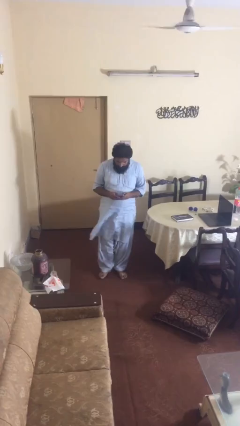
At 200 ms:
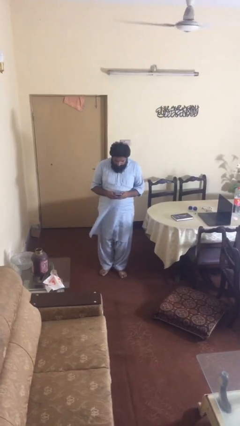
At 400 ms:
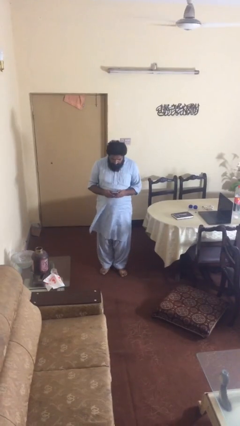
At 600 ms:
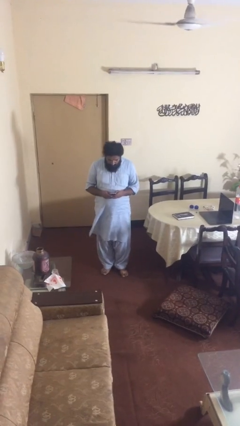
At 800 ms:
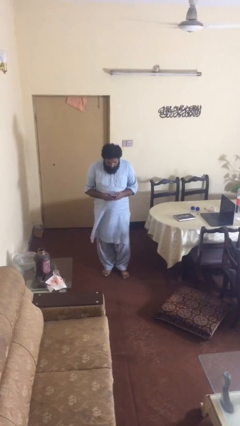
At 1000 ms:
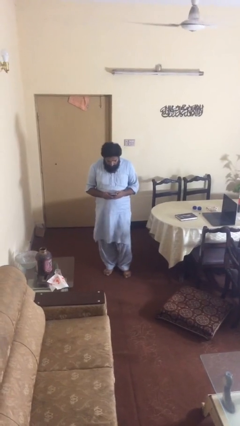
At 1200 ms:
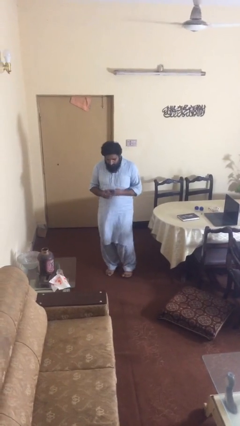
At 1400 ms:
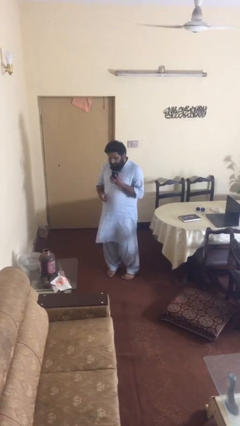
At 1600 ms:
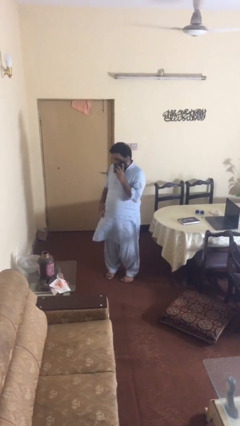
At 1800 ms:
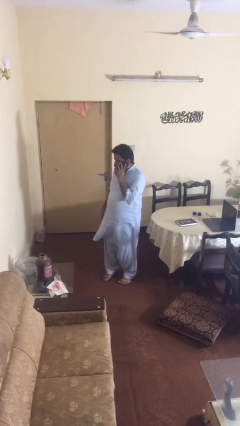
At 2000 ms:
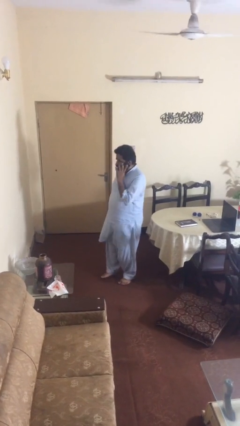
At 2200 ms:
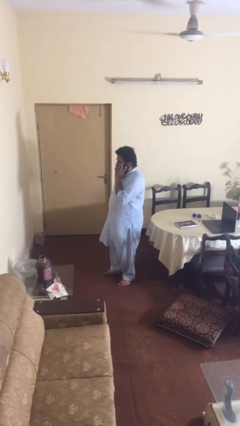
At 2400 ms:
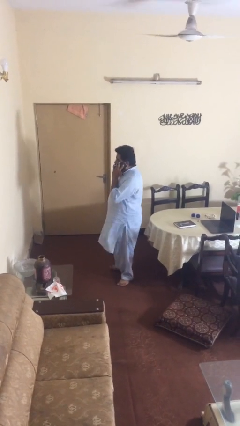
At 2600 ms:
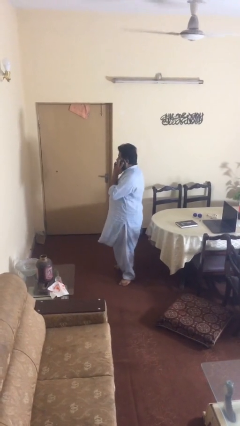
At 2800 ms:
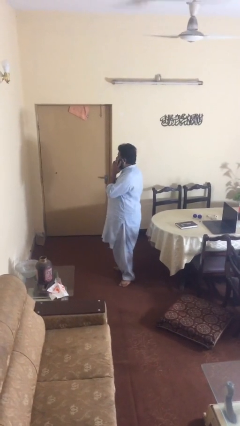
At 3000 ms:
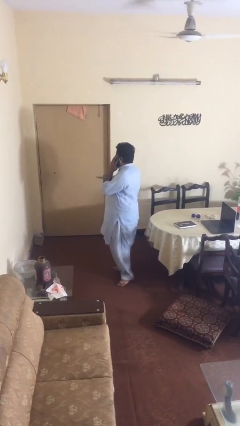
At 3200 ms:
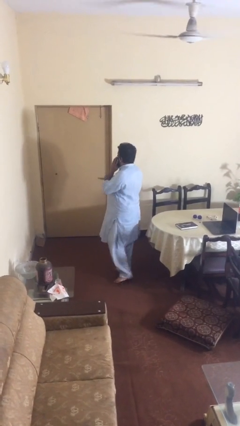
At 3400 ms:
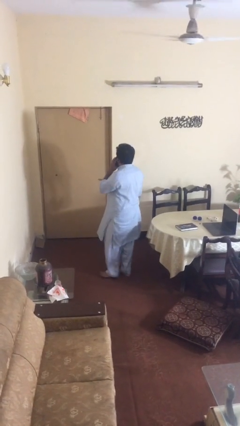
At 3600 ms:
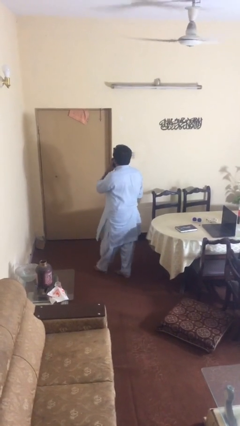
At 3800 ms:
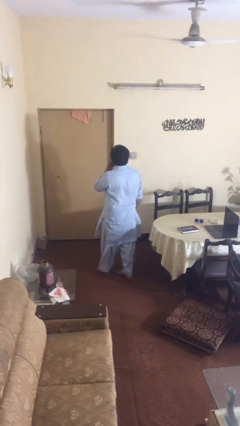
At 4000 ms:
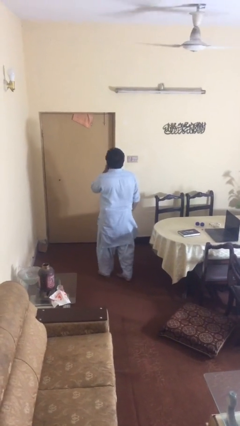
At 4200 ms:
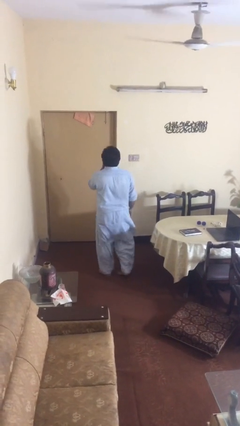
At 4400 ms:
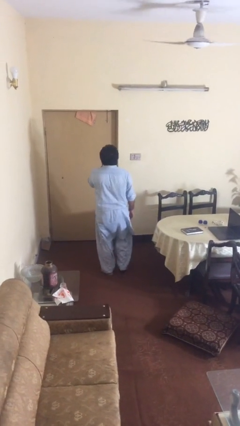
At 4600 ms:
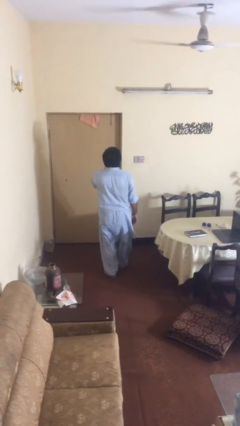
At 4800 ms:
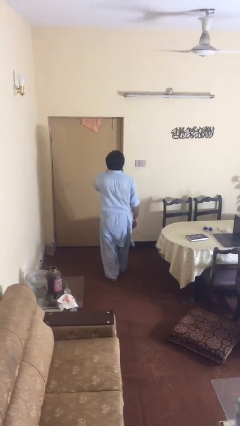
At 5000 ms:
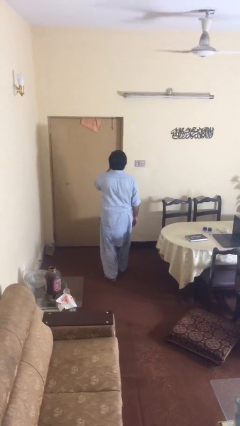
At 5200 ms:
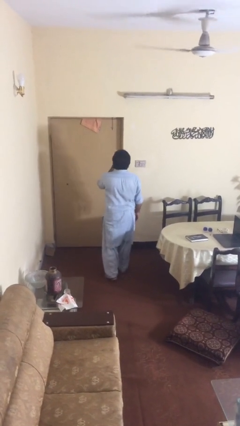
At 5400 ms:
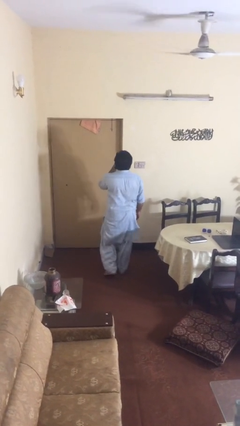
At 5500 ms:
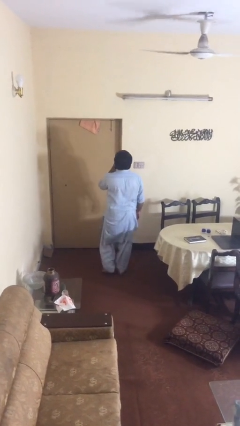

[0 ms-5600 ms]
person talks on phone

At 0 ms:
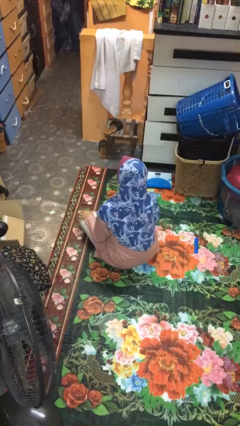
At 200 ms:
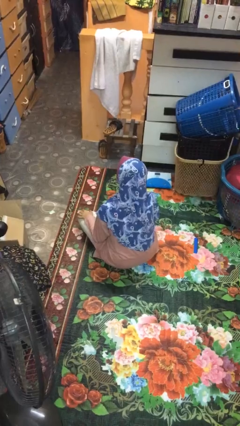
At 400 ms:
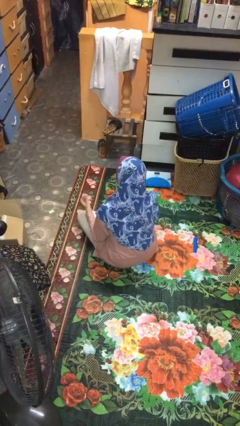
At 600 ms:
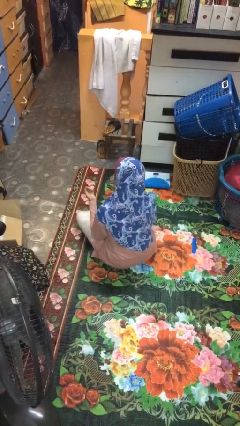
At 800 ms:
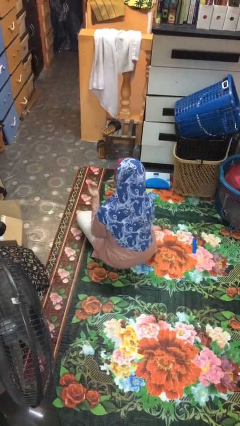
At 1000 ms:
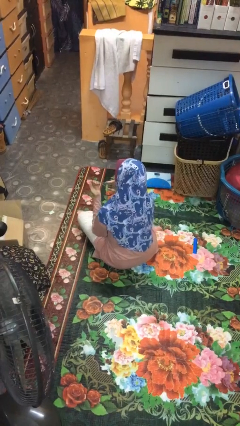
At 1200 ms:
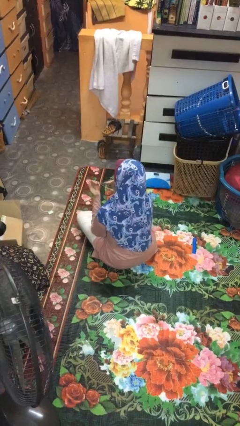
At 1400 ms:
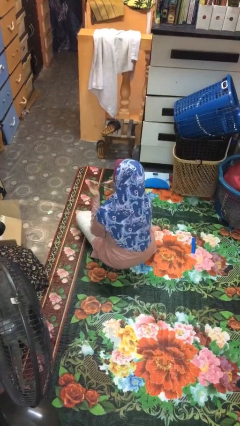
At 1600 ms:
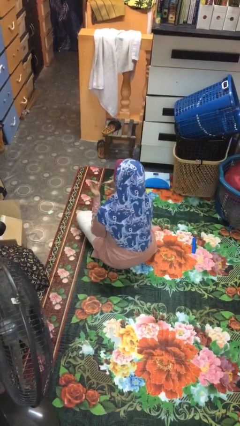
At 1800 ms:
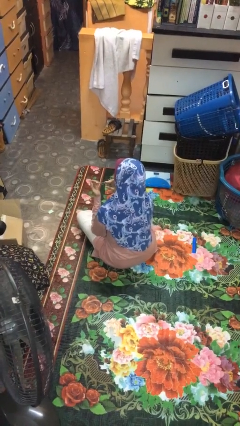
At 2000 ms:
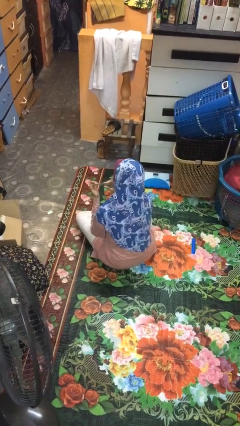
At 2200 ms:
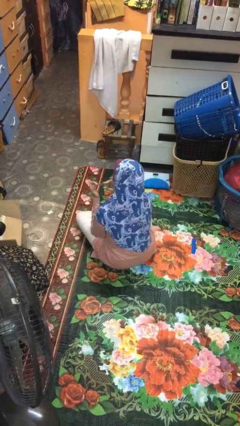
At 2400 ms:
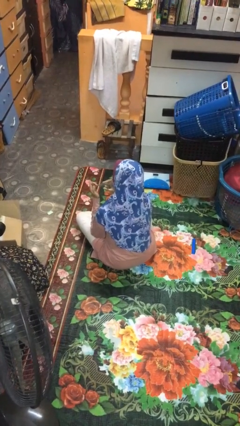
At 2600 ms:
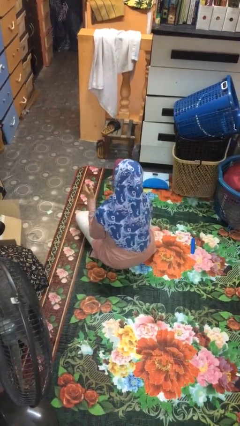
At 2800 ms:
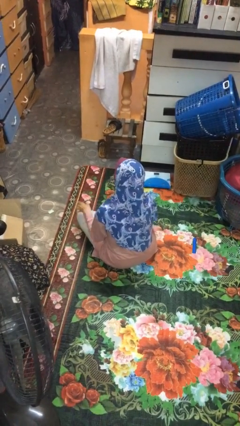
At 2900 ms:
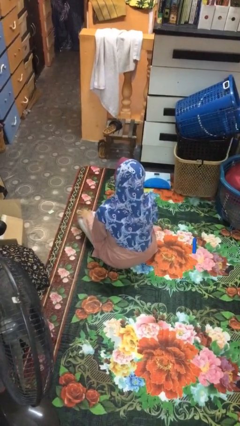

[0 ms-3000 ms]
person clips fingernails

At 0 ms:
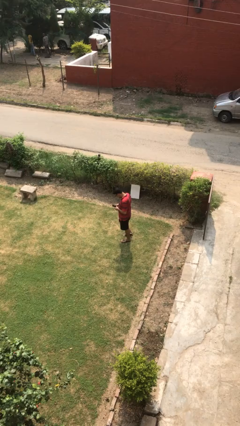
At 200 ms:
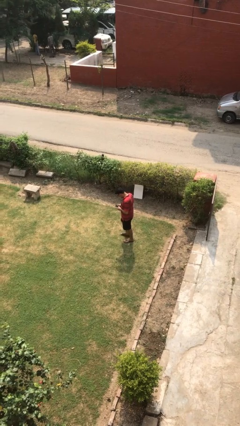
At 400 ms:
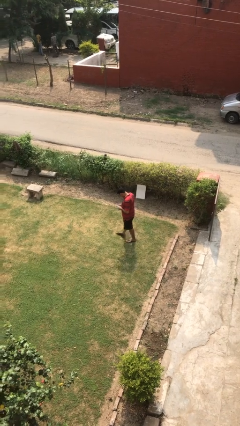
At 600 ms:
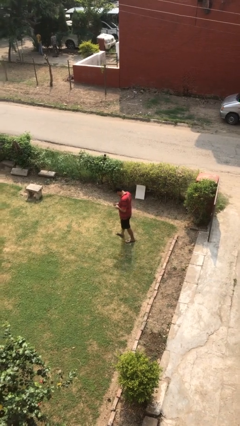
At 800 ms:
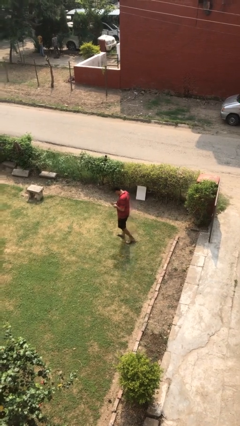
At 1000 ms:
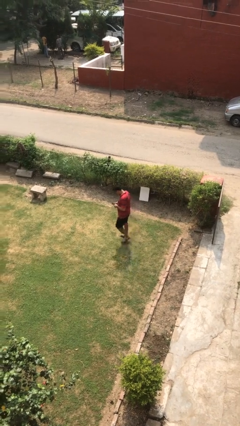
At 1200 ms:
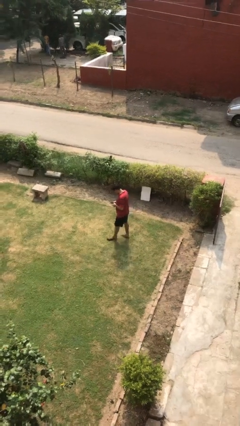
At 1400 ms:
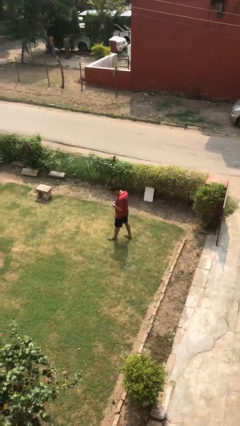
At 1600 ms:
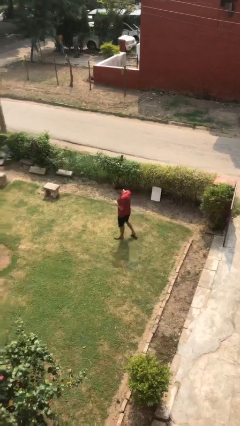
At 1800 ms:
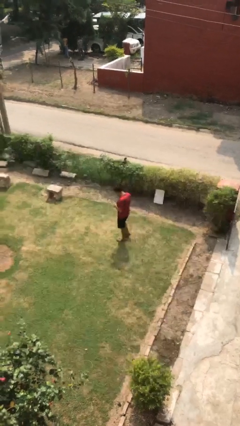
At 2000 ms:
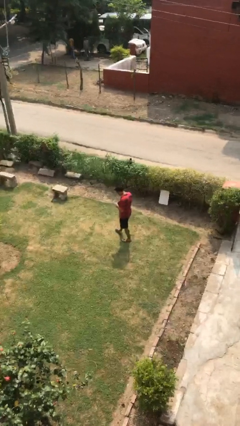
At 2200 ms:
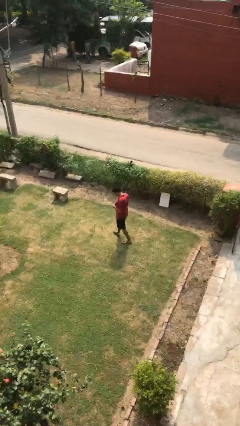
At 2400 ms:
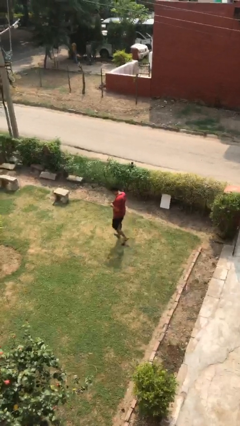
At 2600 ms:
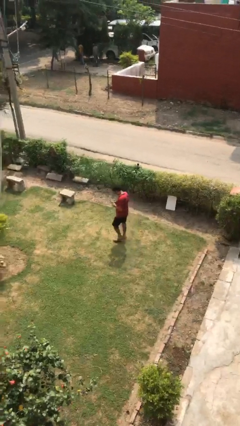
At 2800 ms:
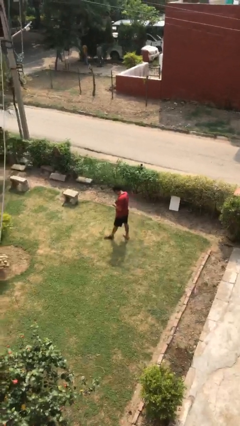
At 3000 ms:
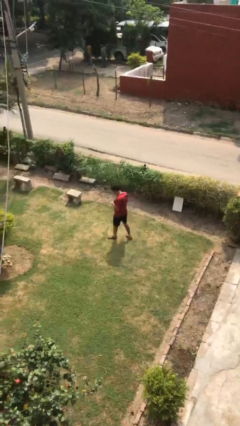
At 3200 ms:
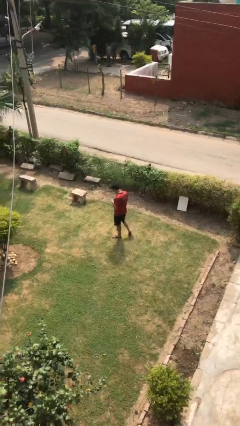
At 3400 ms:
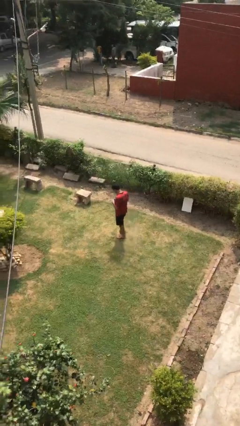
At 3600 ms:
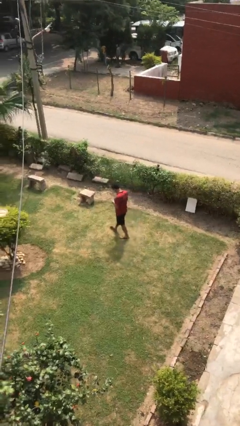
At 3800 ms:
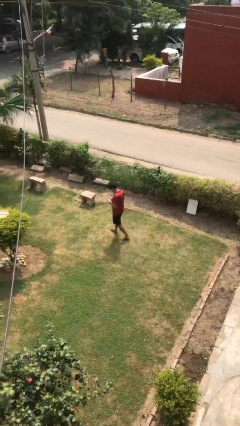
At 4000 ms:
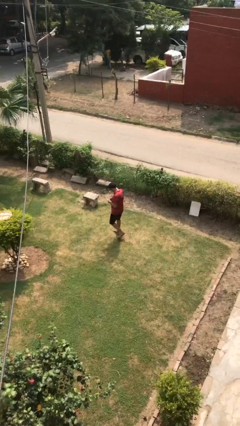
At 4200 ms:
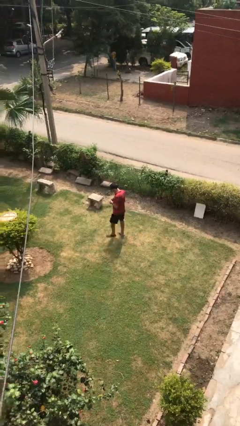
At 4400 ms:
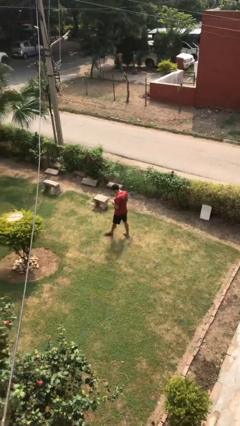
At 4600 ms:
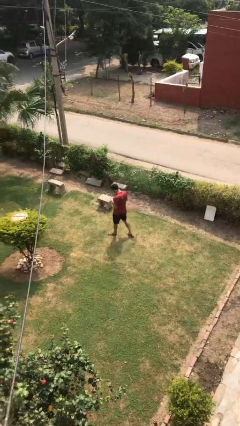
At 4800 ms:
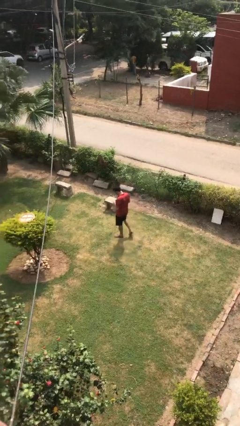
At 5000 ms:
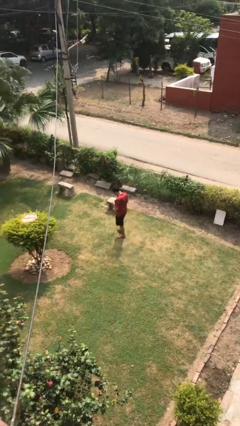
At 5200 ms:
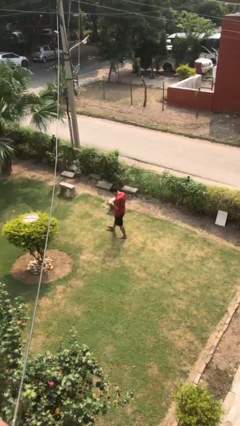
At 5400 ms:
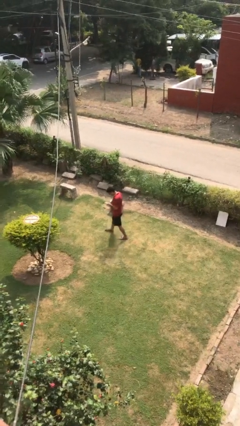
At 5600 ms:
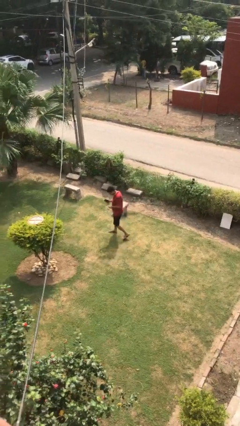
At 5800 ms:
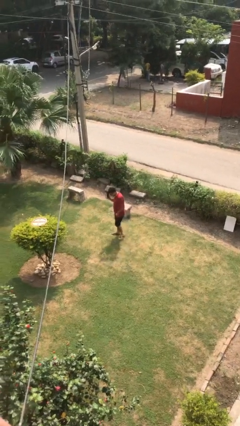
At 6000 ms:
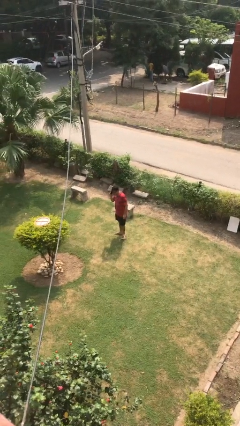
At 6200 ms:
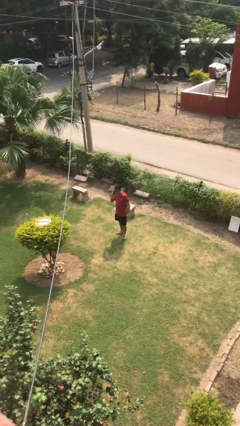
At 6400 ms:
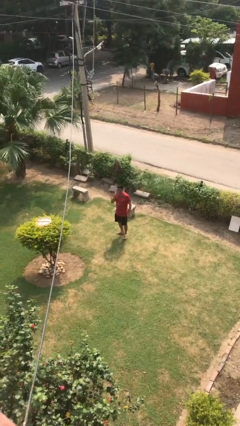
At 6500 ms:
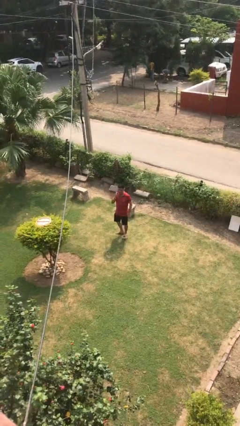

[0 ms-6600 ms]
person texts on phone

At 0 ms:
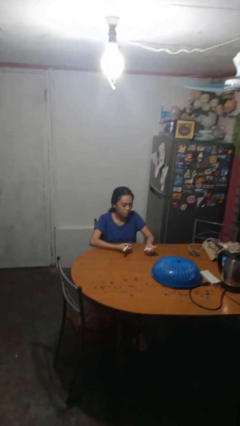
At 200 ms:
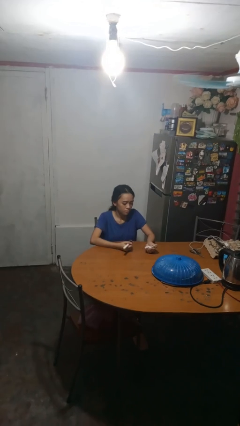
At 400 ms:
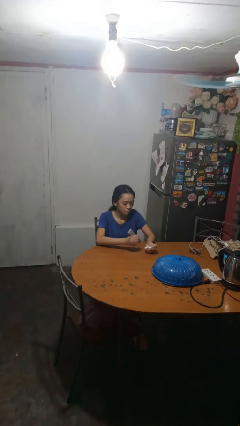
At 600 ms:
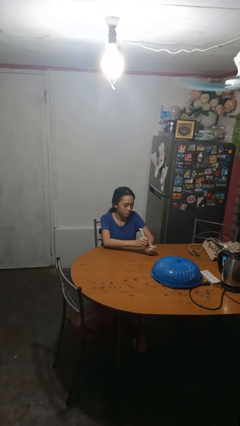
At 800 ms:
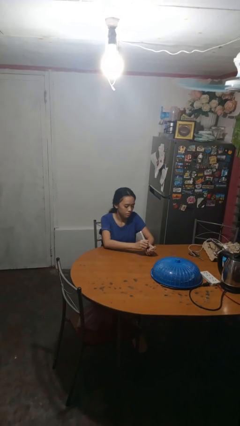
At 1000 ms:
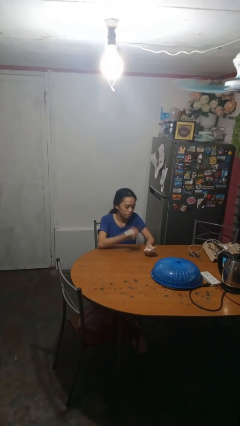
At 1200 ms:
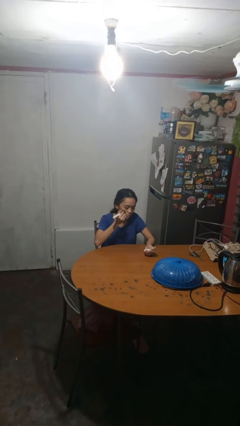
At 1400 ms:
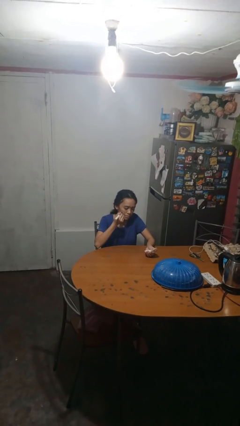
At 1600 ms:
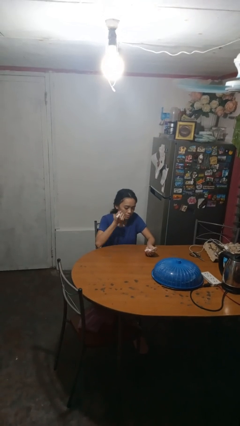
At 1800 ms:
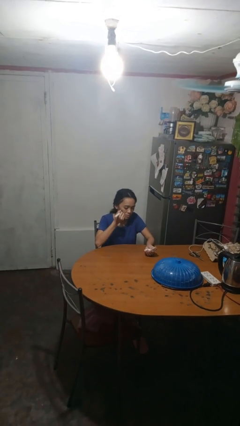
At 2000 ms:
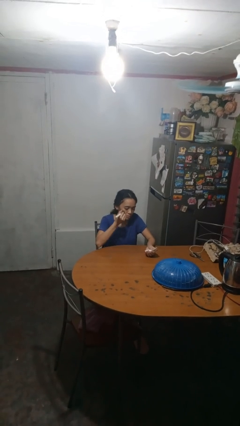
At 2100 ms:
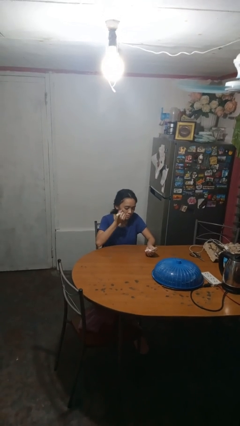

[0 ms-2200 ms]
person applies foundation makeup

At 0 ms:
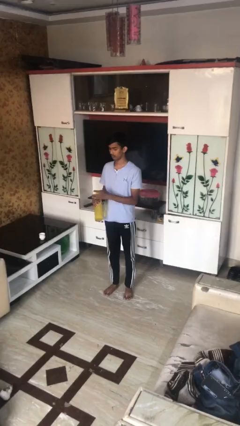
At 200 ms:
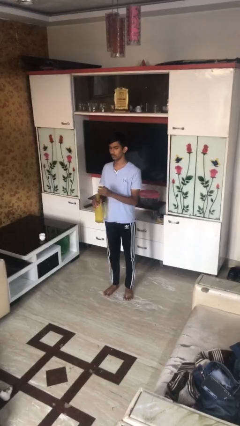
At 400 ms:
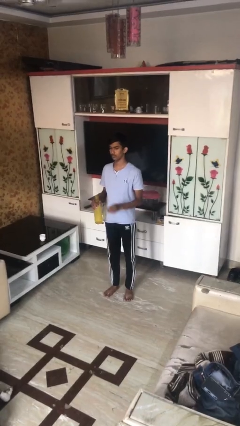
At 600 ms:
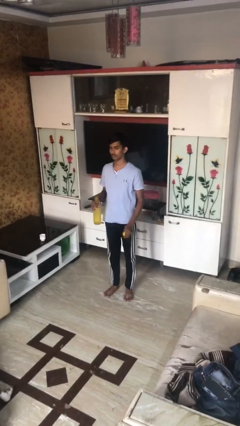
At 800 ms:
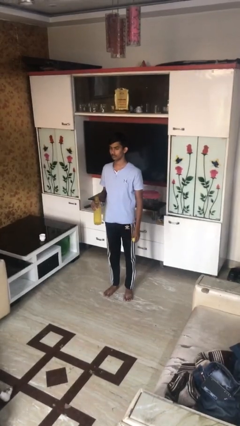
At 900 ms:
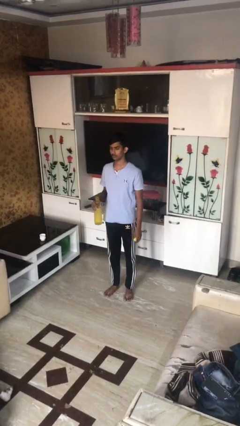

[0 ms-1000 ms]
person unscrews lid from bottle
